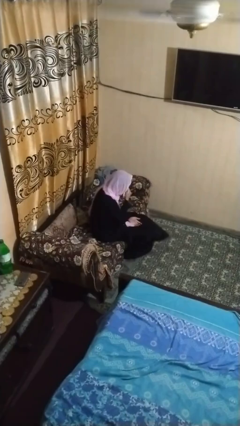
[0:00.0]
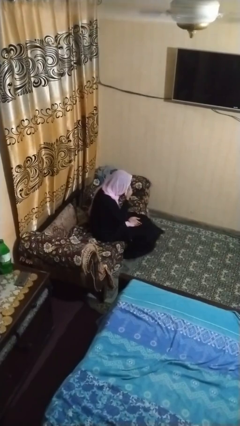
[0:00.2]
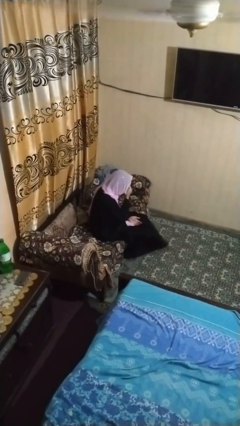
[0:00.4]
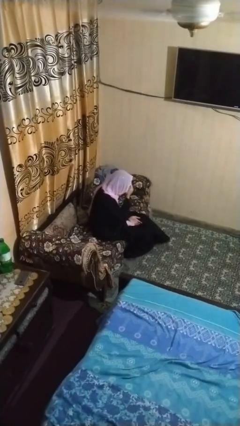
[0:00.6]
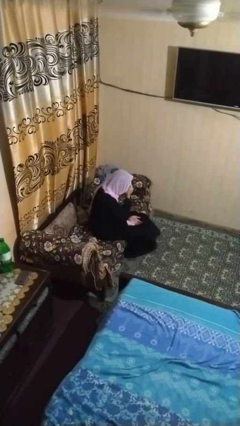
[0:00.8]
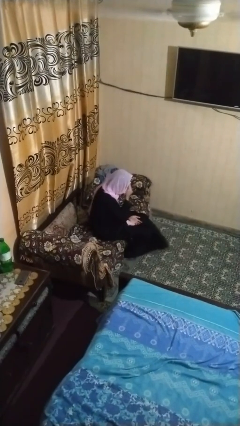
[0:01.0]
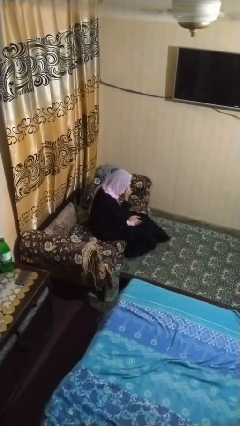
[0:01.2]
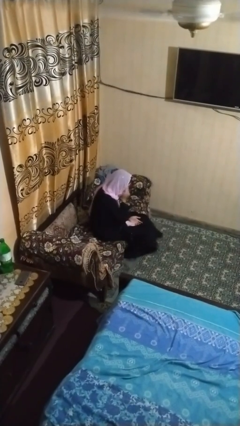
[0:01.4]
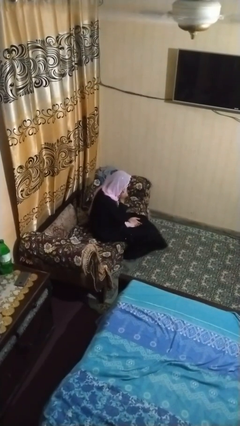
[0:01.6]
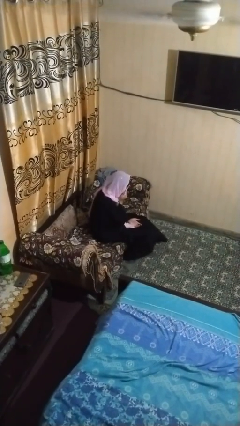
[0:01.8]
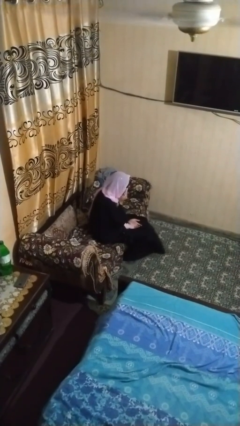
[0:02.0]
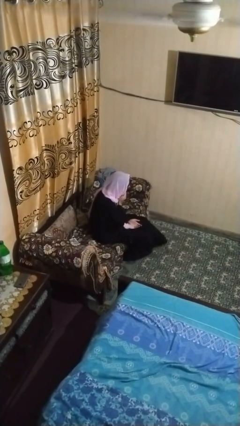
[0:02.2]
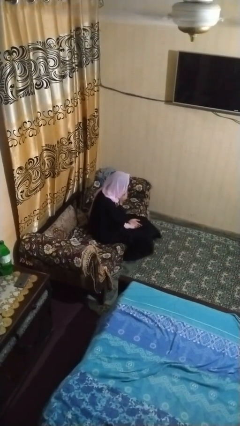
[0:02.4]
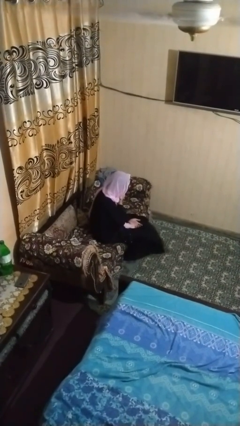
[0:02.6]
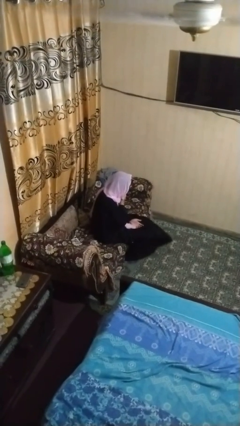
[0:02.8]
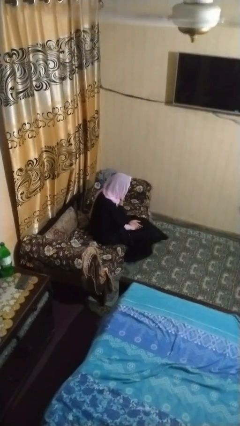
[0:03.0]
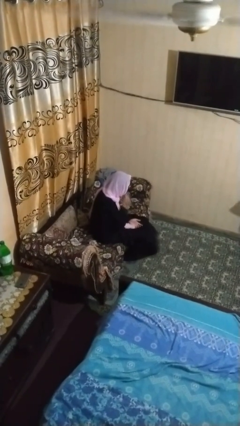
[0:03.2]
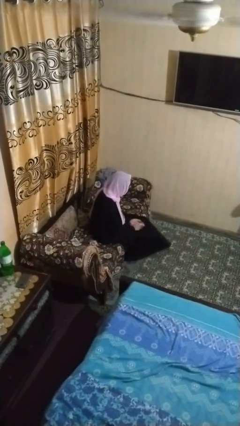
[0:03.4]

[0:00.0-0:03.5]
person wipes mouth with napkin

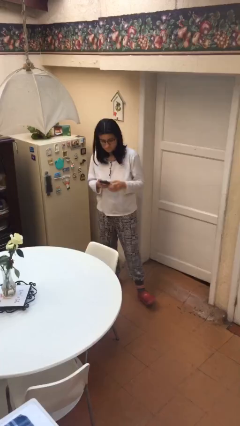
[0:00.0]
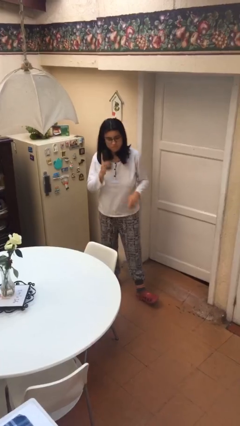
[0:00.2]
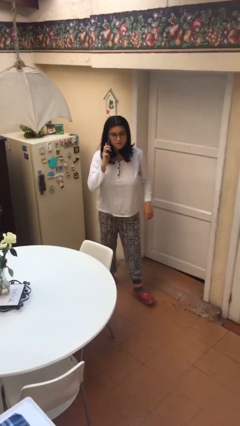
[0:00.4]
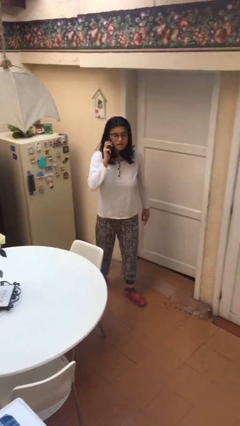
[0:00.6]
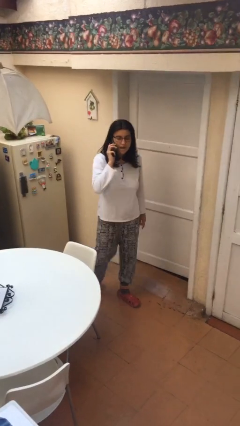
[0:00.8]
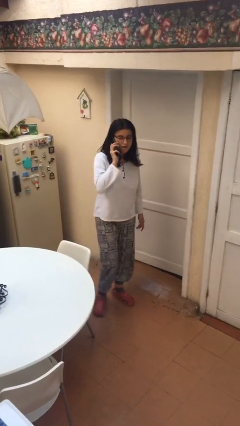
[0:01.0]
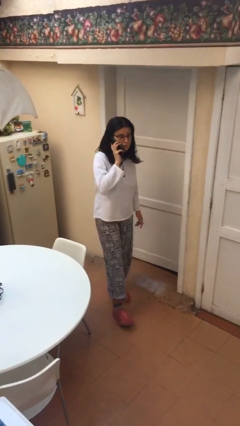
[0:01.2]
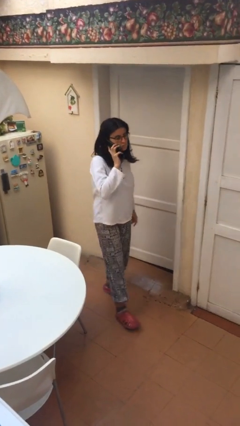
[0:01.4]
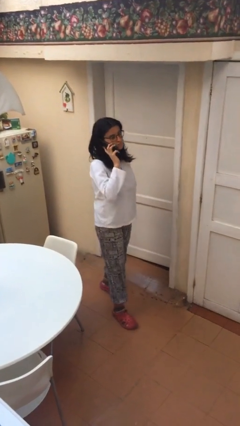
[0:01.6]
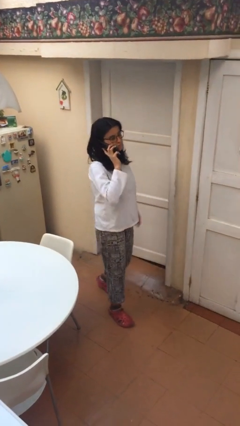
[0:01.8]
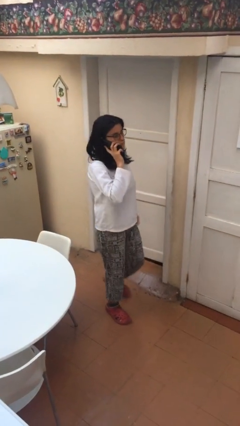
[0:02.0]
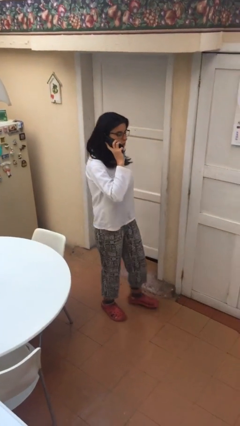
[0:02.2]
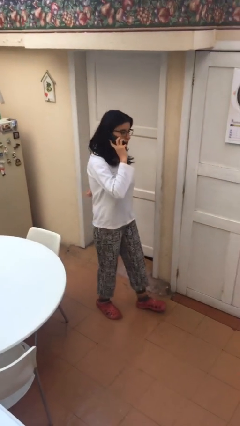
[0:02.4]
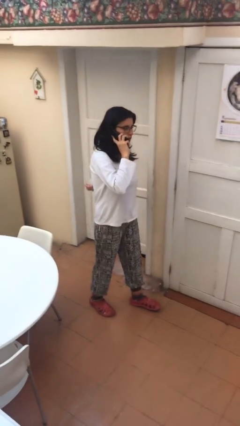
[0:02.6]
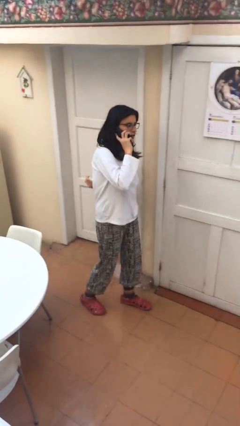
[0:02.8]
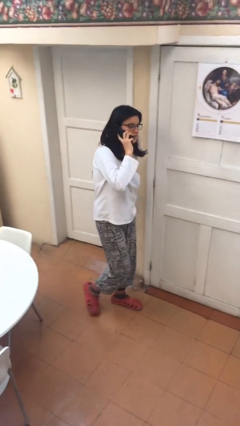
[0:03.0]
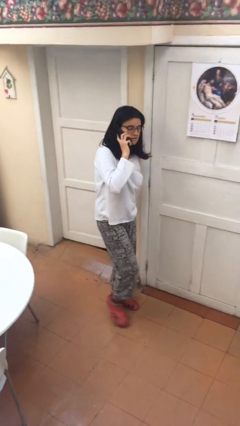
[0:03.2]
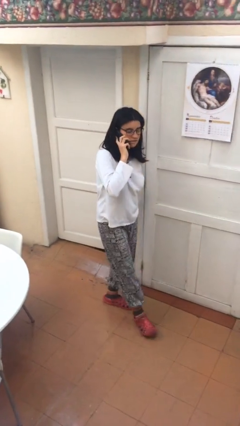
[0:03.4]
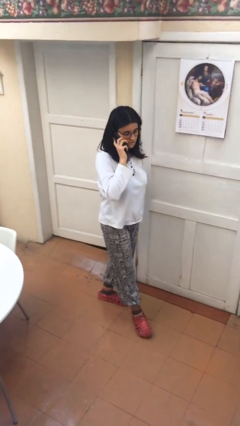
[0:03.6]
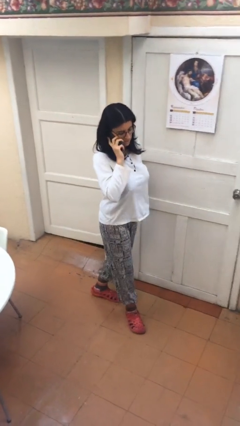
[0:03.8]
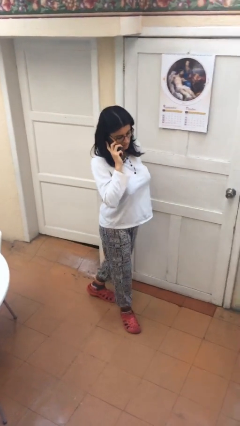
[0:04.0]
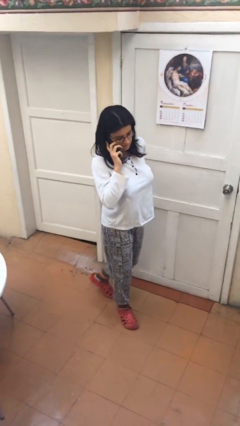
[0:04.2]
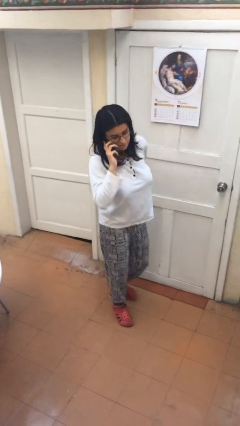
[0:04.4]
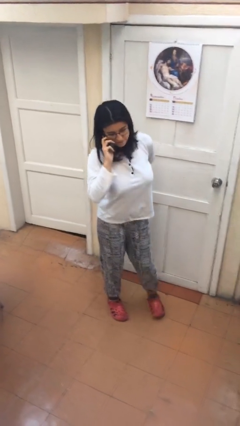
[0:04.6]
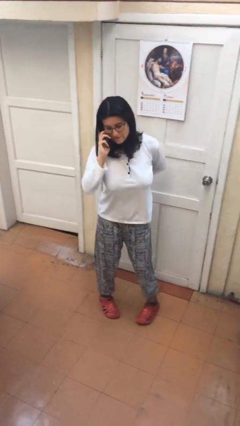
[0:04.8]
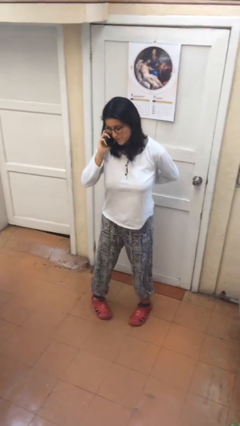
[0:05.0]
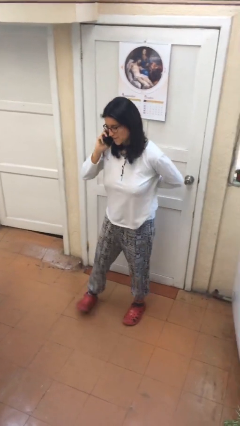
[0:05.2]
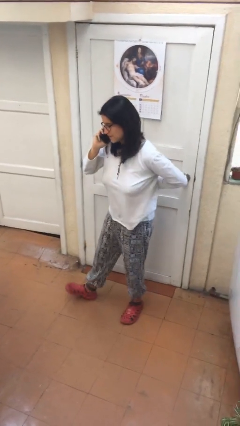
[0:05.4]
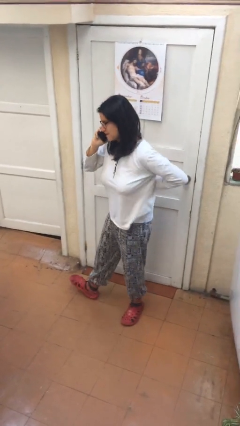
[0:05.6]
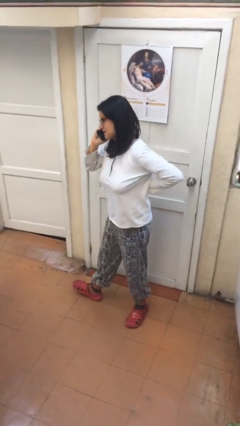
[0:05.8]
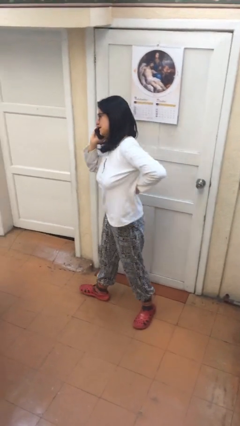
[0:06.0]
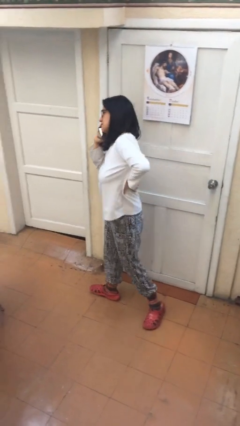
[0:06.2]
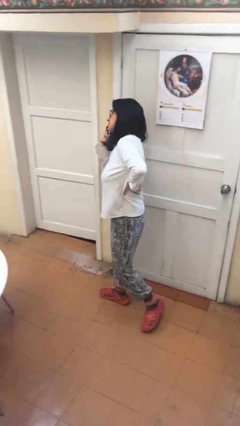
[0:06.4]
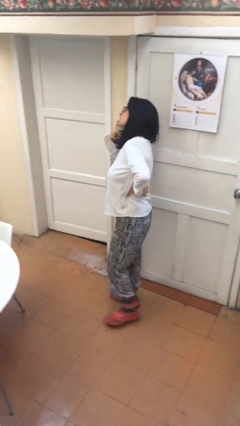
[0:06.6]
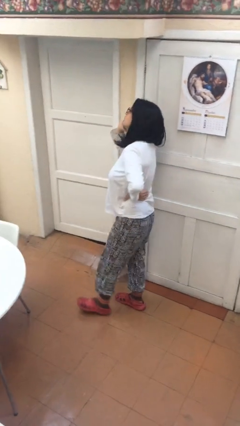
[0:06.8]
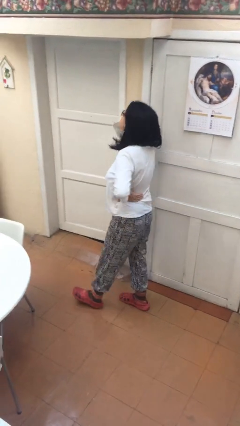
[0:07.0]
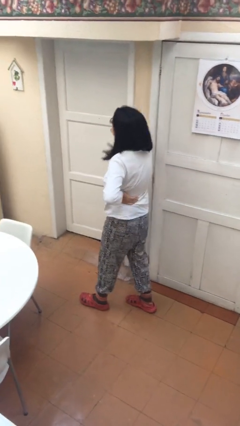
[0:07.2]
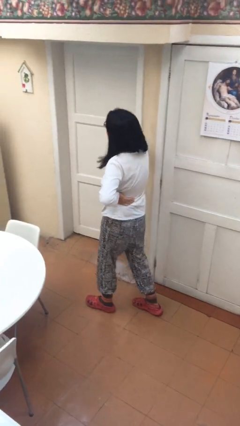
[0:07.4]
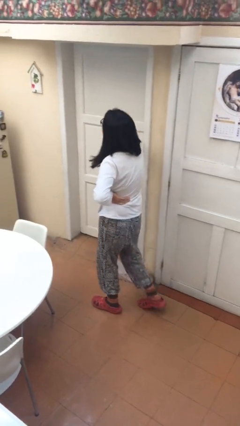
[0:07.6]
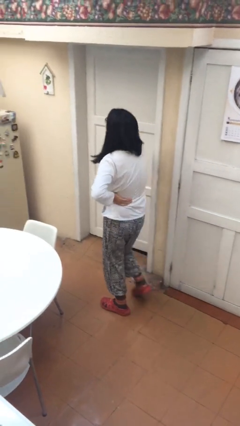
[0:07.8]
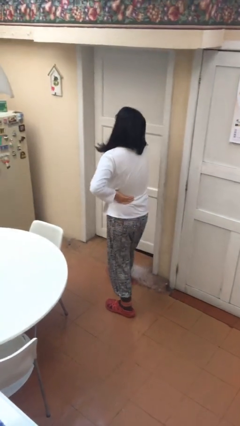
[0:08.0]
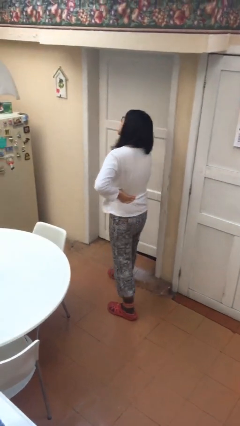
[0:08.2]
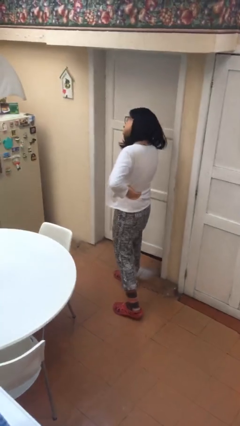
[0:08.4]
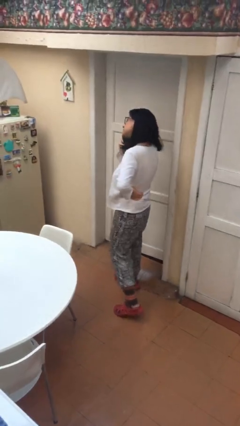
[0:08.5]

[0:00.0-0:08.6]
person talks on phone

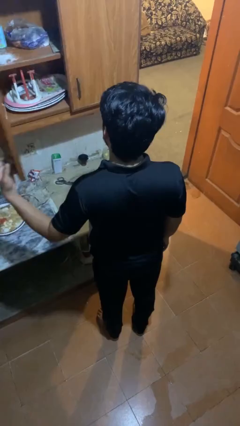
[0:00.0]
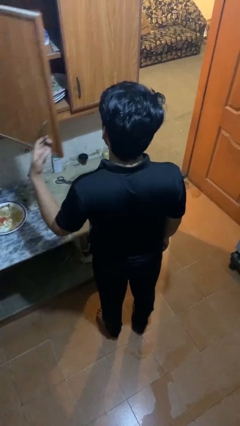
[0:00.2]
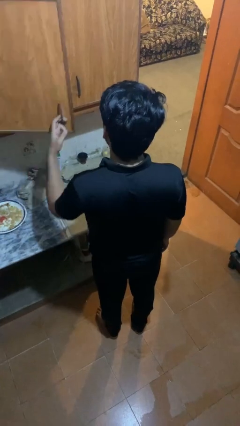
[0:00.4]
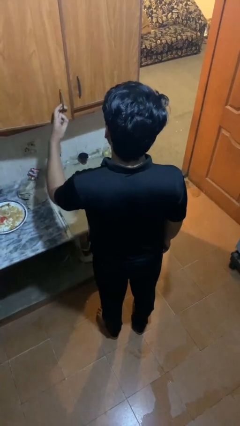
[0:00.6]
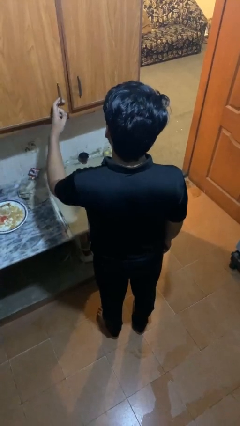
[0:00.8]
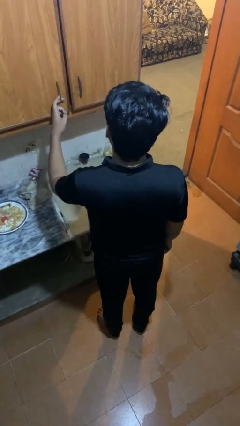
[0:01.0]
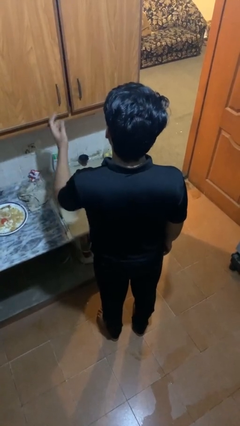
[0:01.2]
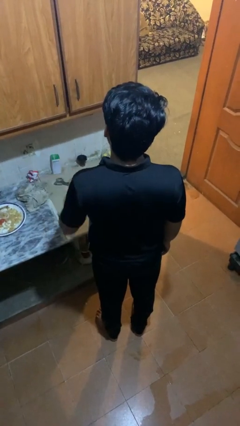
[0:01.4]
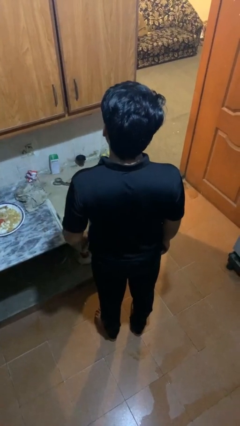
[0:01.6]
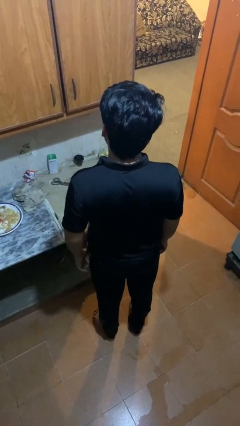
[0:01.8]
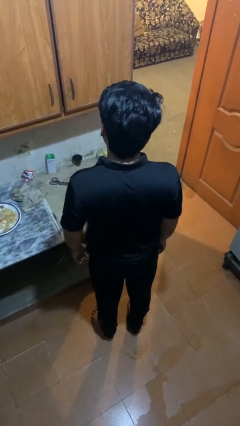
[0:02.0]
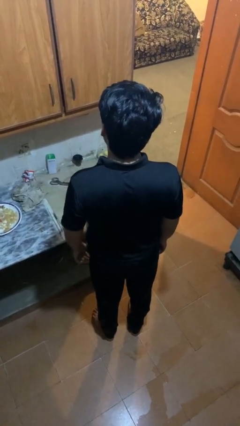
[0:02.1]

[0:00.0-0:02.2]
person closes cabinet

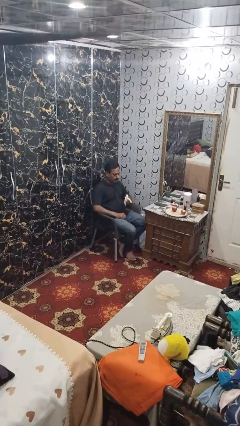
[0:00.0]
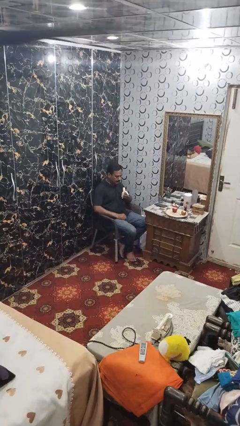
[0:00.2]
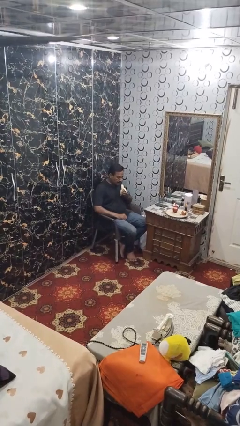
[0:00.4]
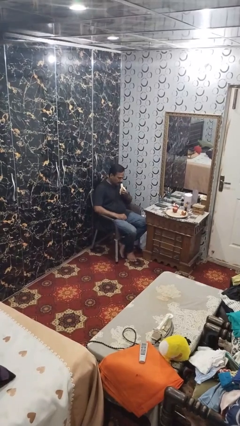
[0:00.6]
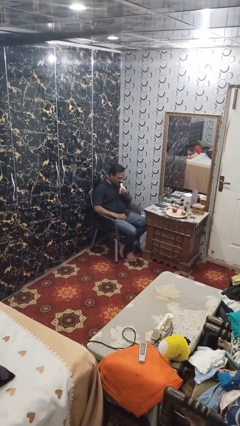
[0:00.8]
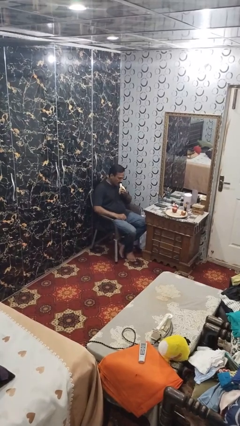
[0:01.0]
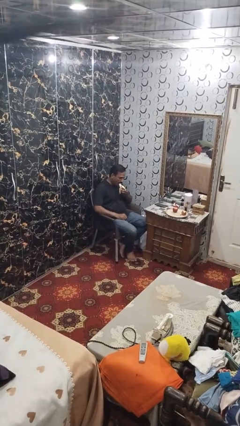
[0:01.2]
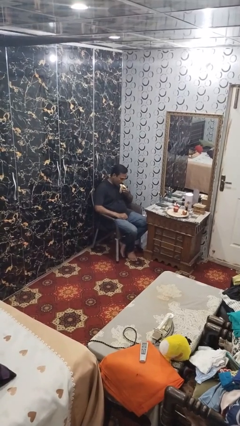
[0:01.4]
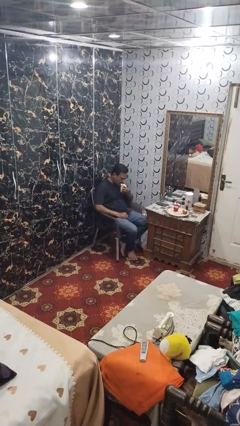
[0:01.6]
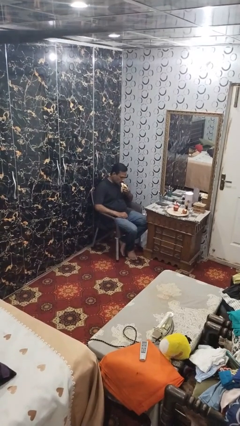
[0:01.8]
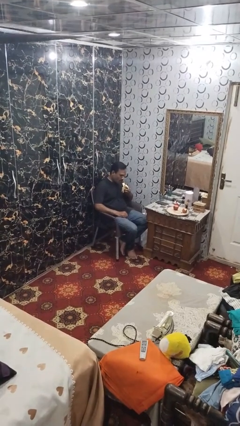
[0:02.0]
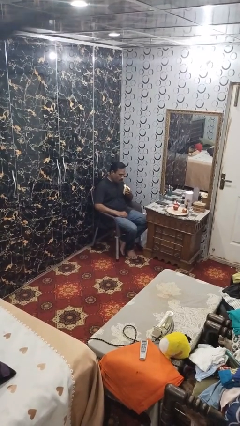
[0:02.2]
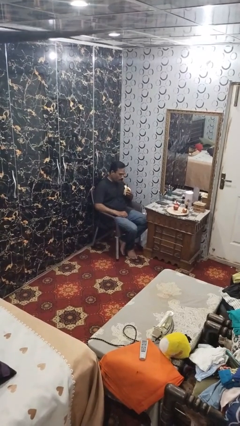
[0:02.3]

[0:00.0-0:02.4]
person eats banana

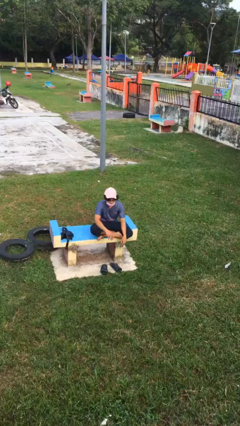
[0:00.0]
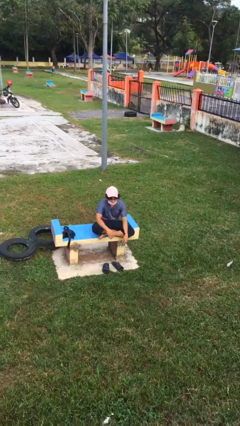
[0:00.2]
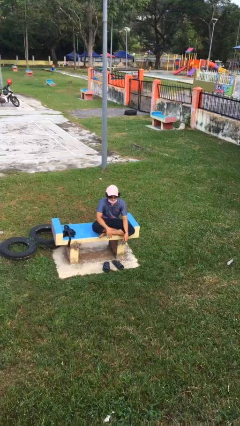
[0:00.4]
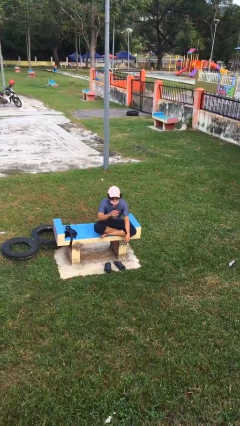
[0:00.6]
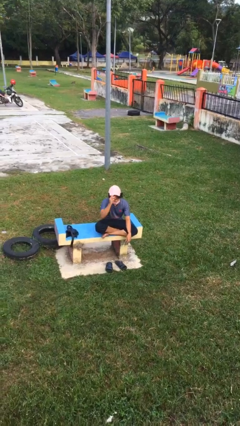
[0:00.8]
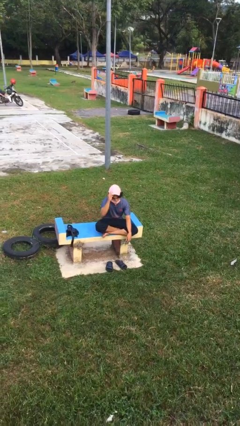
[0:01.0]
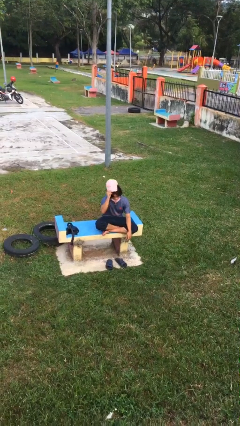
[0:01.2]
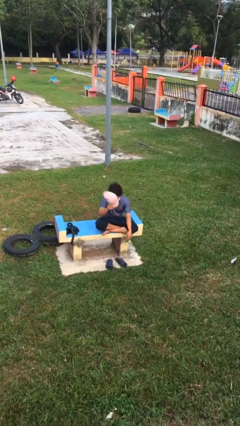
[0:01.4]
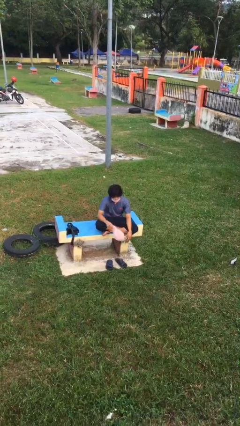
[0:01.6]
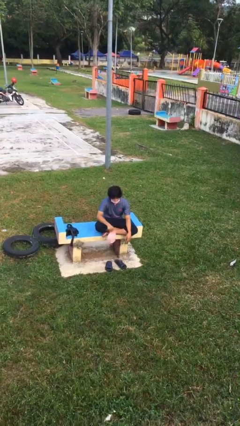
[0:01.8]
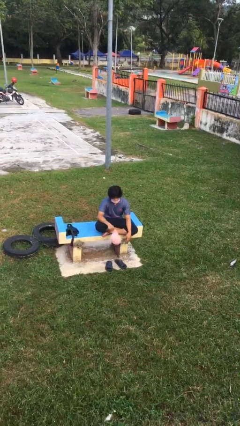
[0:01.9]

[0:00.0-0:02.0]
person takes off hat
